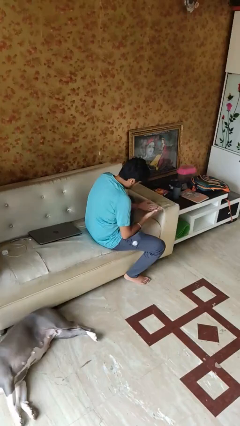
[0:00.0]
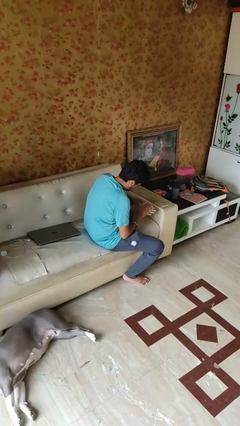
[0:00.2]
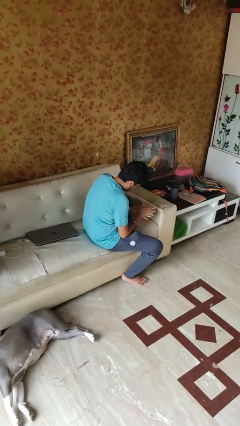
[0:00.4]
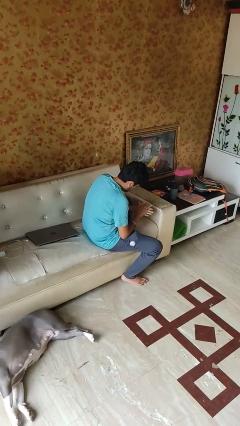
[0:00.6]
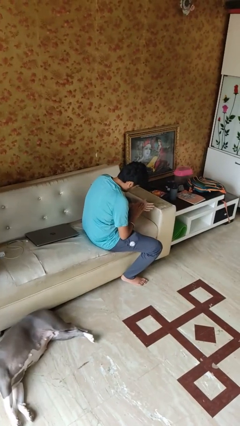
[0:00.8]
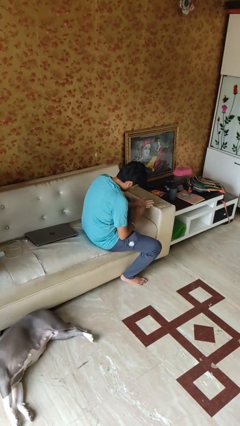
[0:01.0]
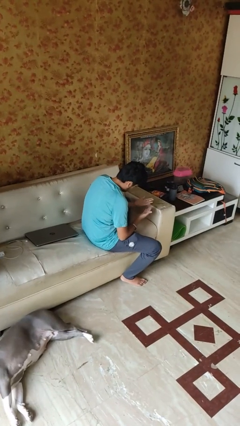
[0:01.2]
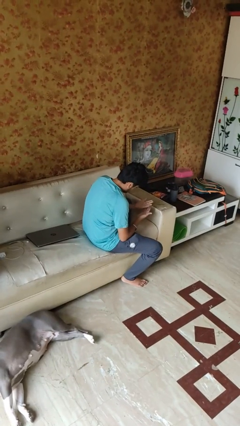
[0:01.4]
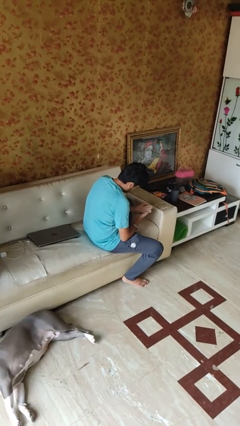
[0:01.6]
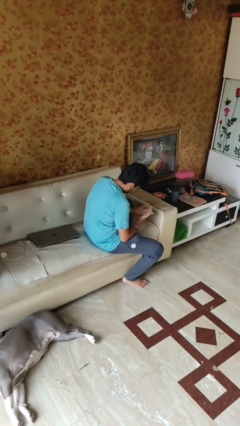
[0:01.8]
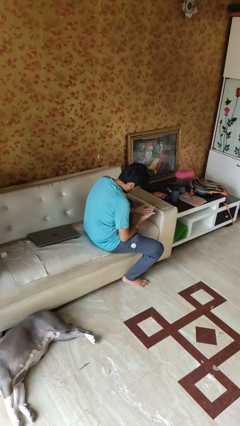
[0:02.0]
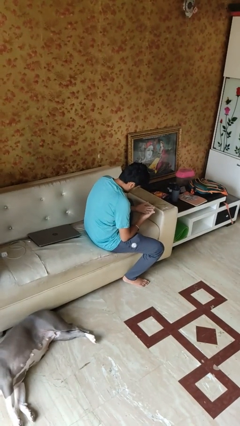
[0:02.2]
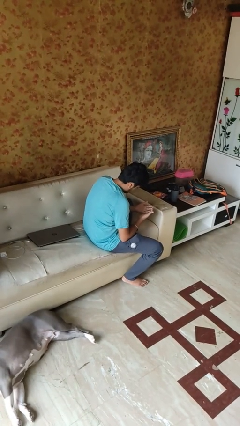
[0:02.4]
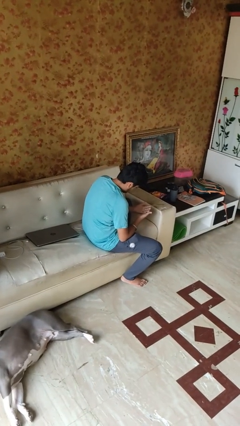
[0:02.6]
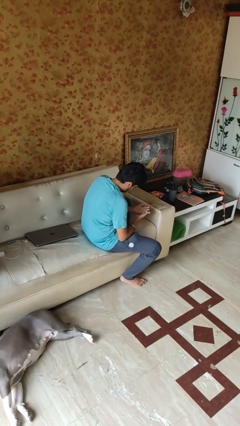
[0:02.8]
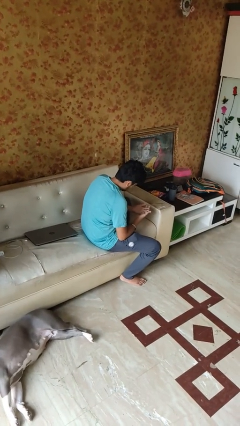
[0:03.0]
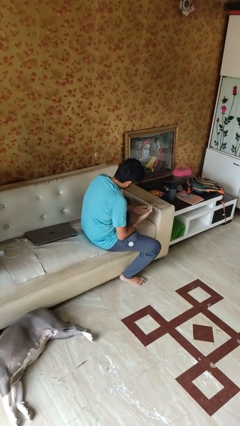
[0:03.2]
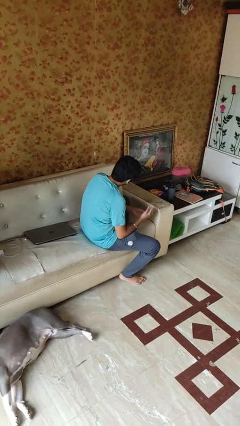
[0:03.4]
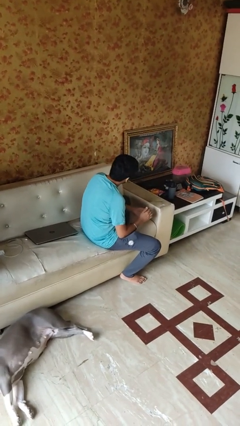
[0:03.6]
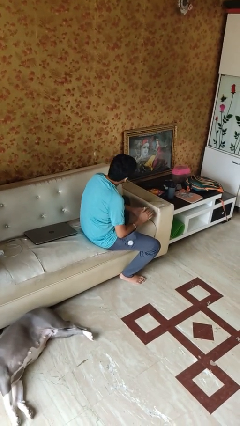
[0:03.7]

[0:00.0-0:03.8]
person looks at hands in lap

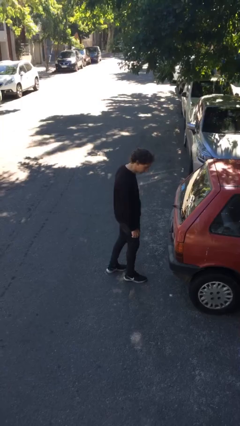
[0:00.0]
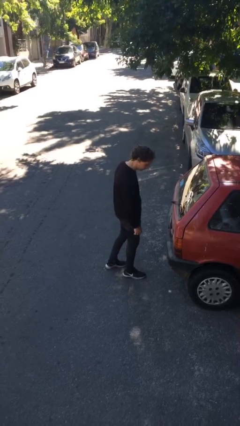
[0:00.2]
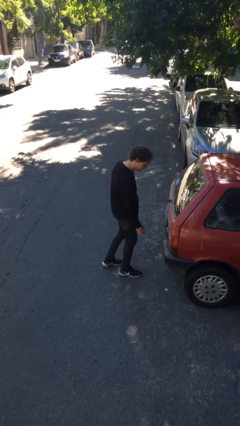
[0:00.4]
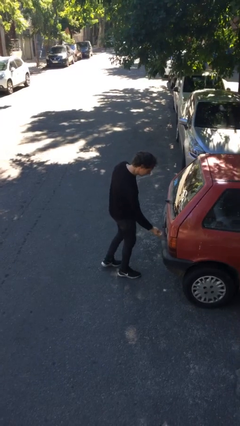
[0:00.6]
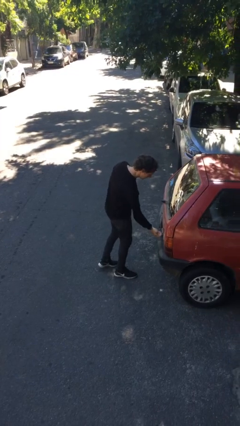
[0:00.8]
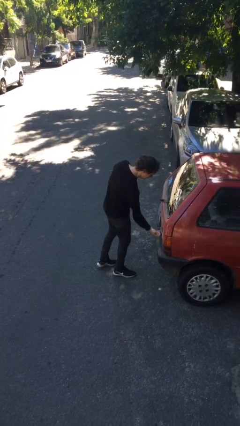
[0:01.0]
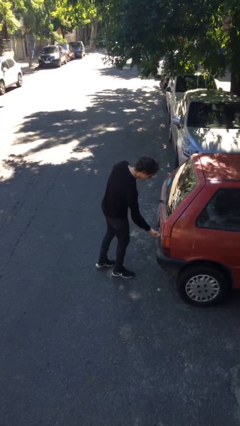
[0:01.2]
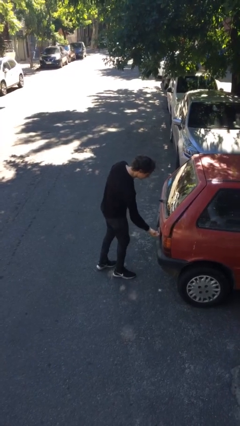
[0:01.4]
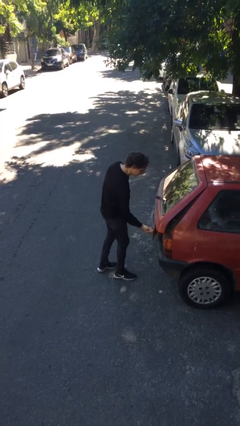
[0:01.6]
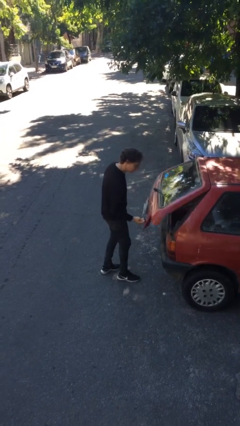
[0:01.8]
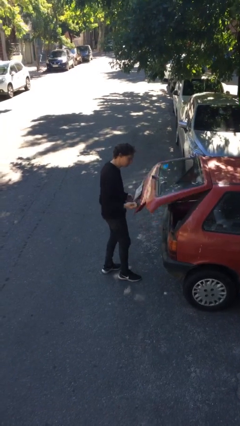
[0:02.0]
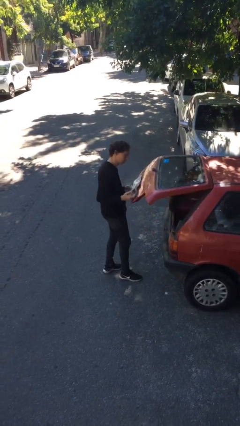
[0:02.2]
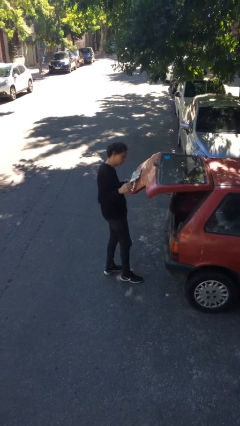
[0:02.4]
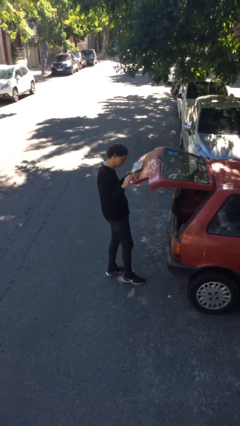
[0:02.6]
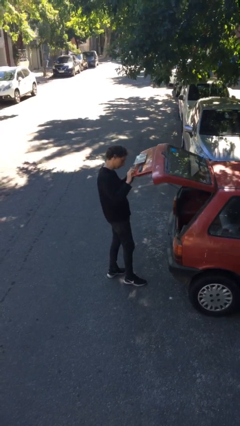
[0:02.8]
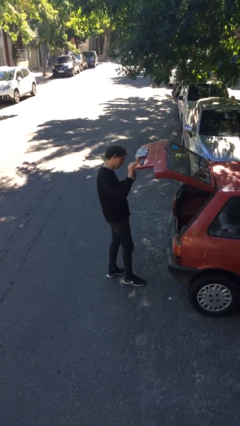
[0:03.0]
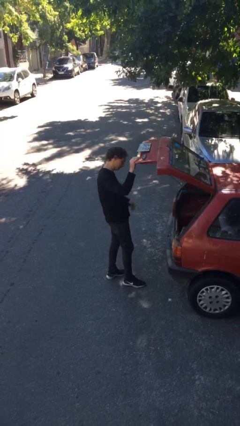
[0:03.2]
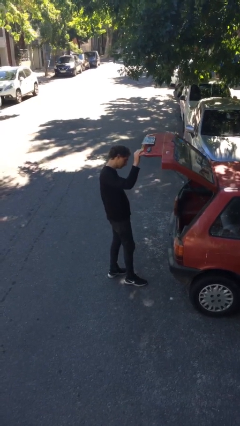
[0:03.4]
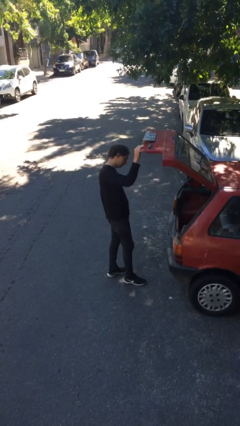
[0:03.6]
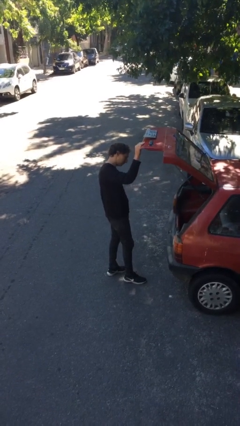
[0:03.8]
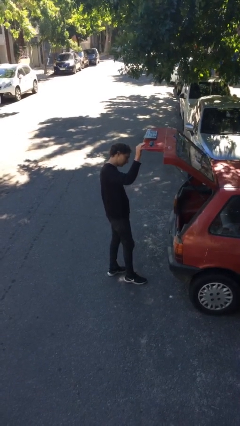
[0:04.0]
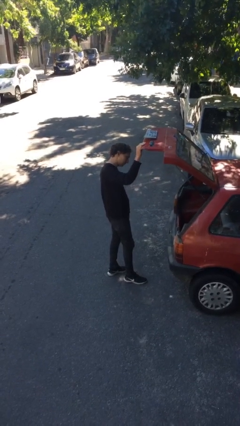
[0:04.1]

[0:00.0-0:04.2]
person opens car trunk

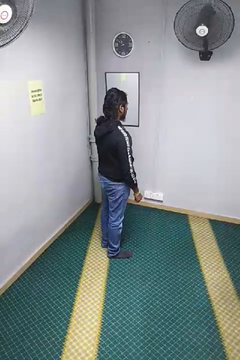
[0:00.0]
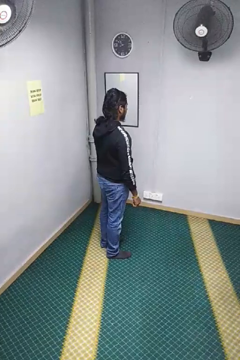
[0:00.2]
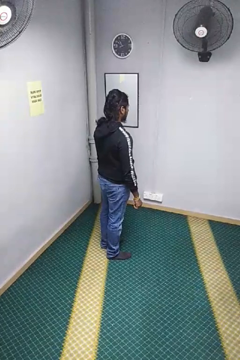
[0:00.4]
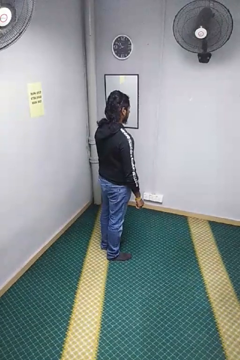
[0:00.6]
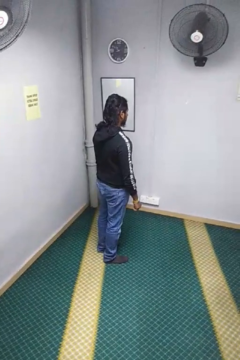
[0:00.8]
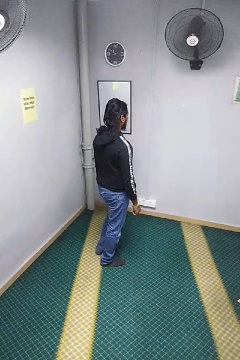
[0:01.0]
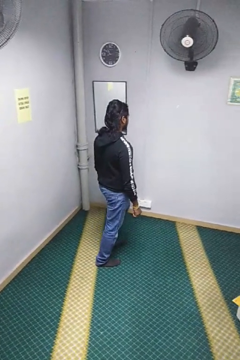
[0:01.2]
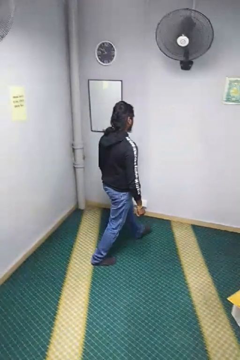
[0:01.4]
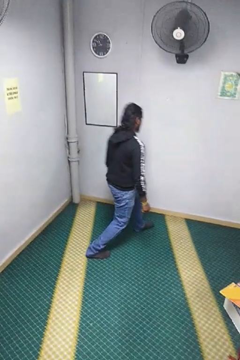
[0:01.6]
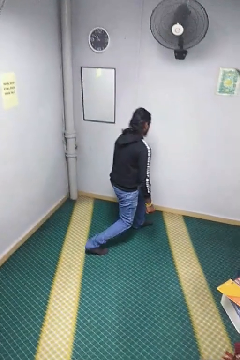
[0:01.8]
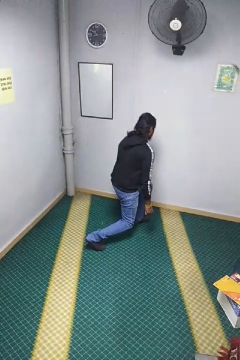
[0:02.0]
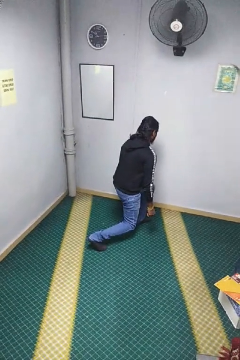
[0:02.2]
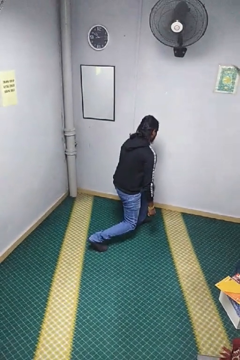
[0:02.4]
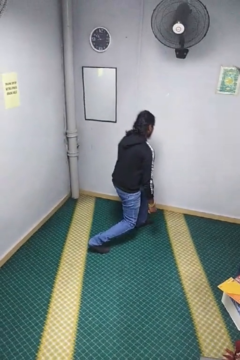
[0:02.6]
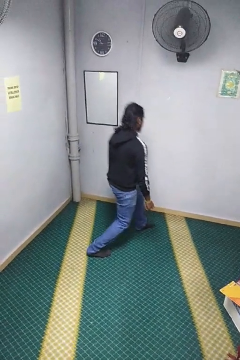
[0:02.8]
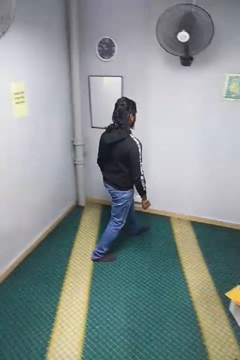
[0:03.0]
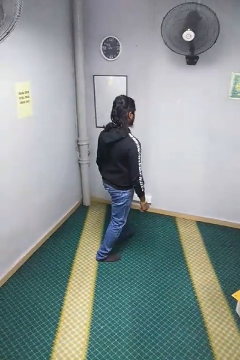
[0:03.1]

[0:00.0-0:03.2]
person exercises with lunges

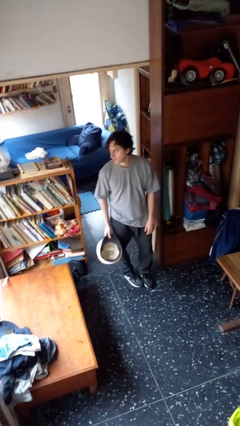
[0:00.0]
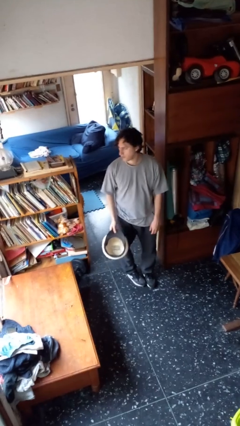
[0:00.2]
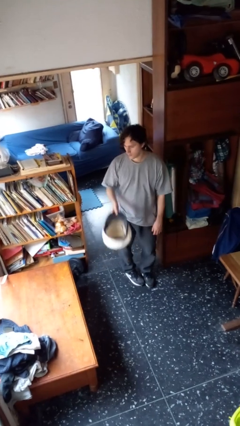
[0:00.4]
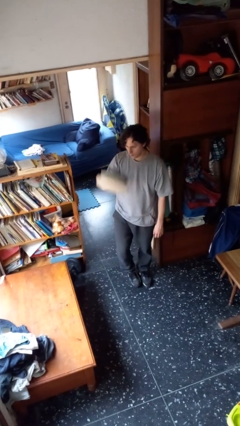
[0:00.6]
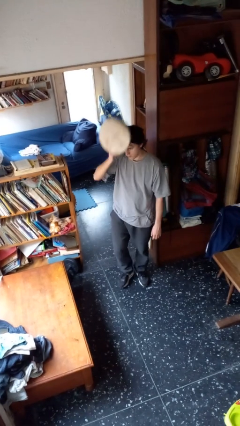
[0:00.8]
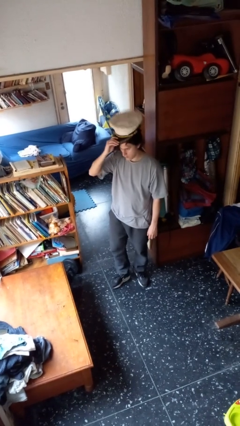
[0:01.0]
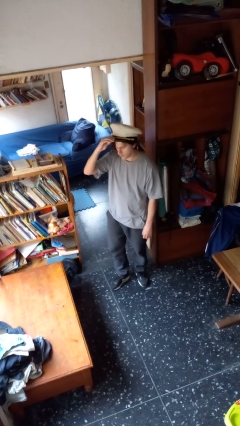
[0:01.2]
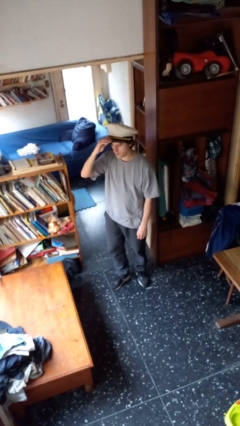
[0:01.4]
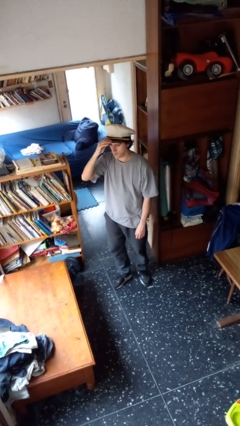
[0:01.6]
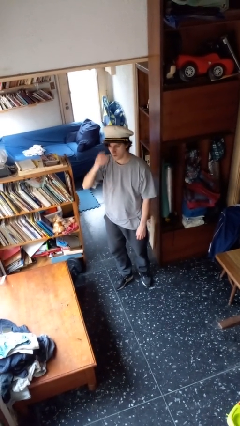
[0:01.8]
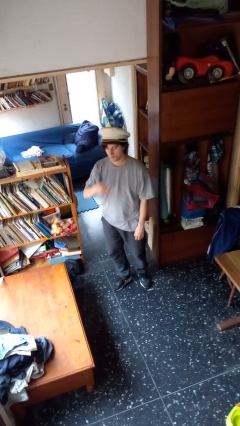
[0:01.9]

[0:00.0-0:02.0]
person puts on hat

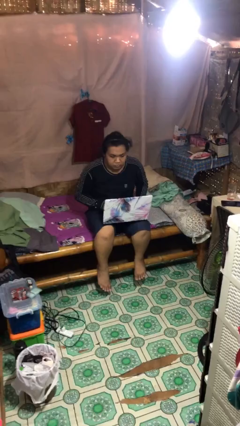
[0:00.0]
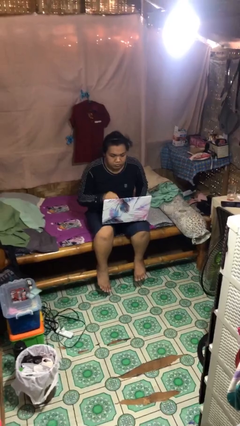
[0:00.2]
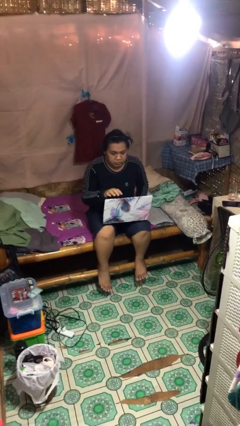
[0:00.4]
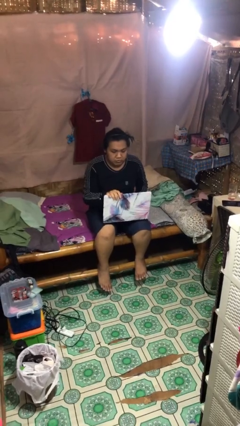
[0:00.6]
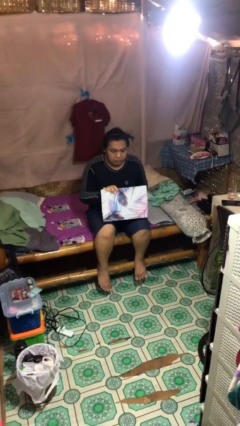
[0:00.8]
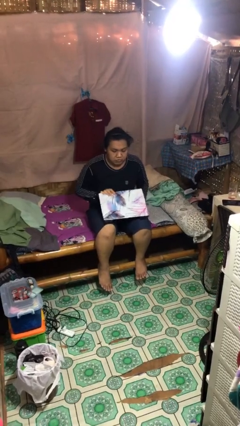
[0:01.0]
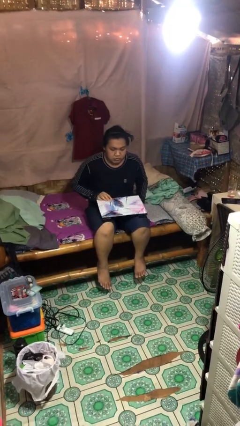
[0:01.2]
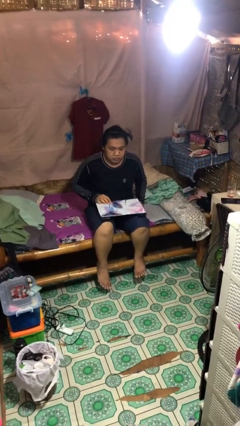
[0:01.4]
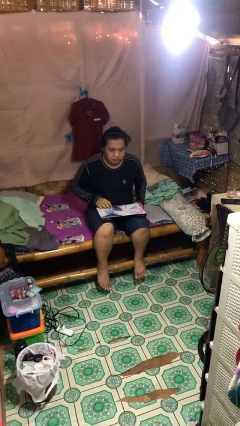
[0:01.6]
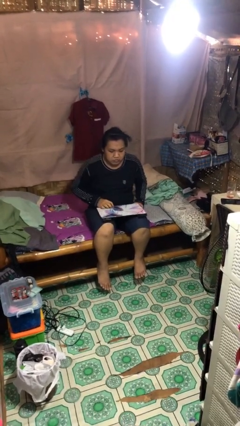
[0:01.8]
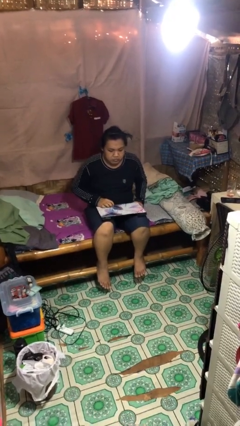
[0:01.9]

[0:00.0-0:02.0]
person closes laptop

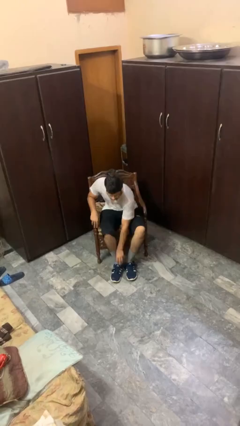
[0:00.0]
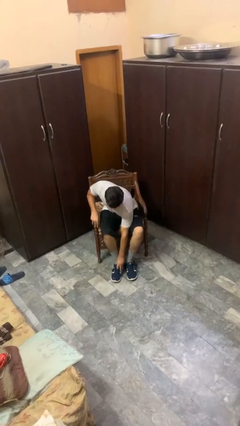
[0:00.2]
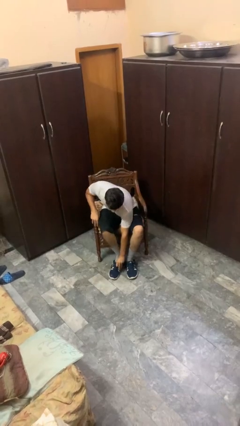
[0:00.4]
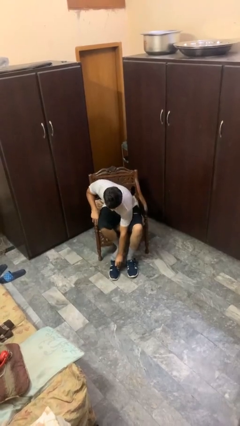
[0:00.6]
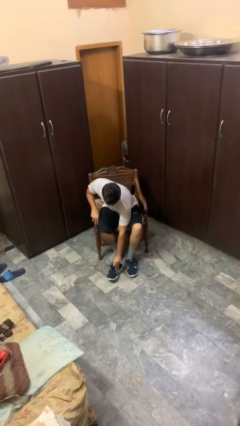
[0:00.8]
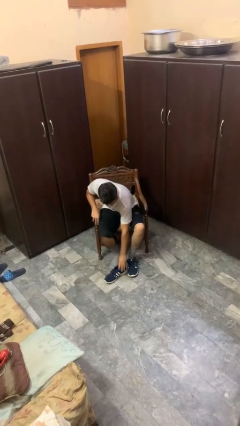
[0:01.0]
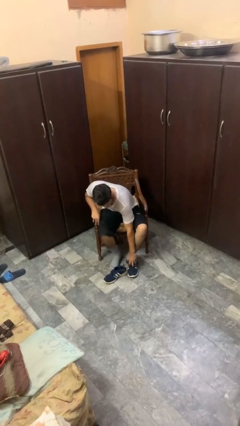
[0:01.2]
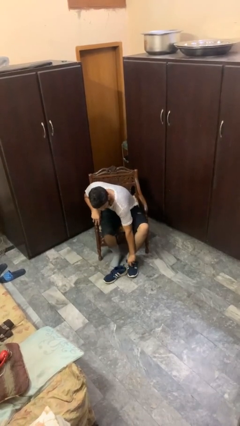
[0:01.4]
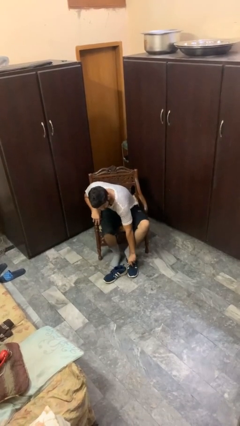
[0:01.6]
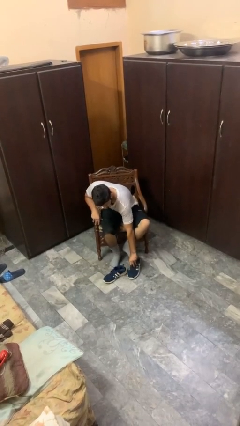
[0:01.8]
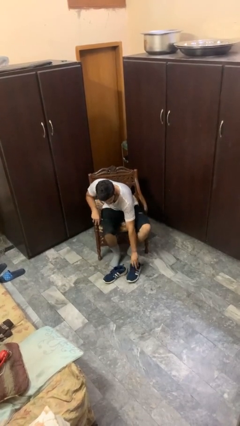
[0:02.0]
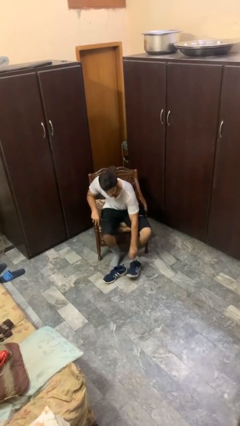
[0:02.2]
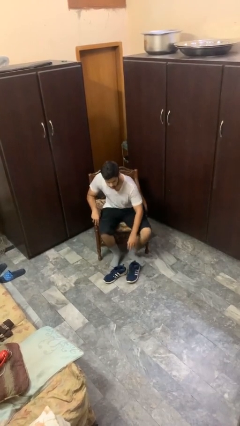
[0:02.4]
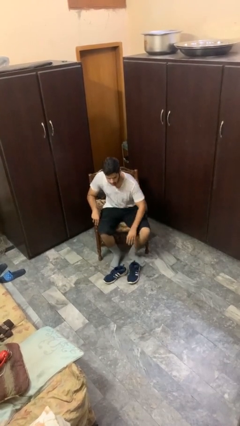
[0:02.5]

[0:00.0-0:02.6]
person takes off shoes

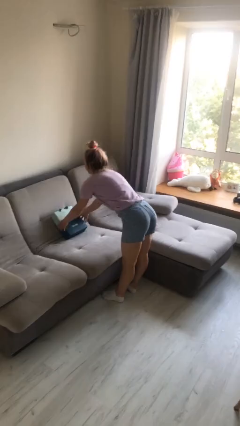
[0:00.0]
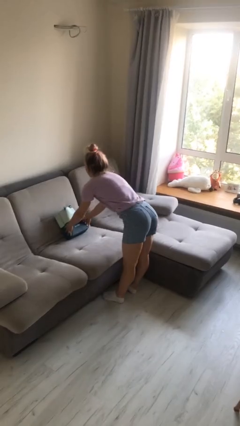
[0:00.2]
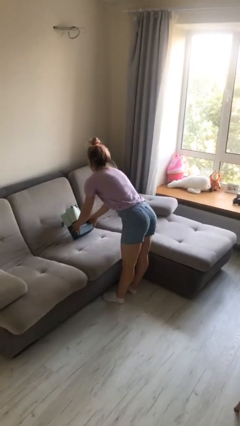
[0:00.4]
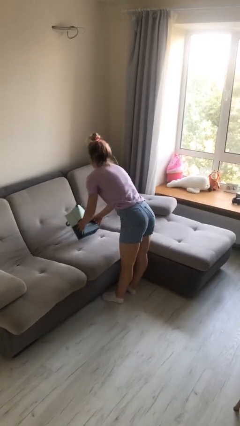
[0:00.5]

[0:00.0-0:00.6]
person picks up object from couch
